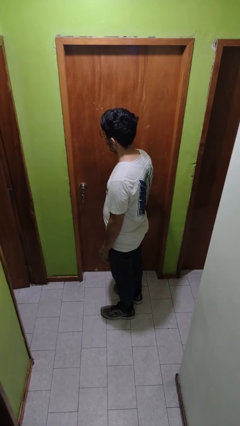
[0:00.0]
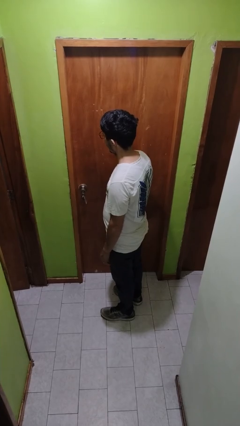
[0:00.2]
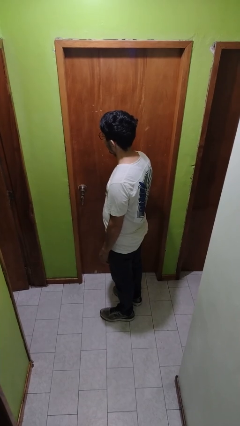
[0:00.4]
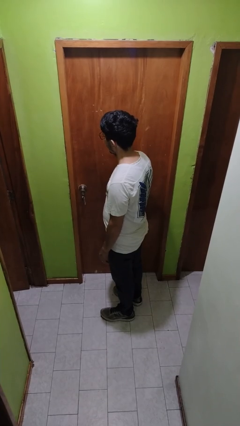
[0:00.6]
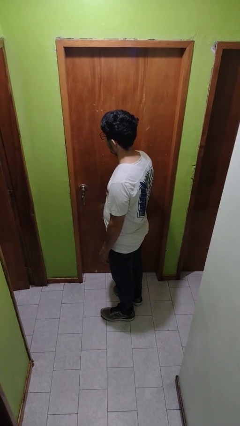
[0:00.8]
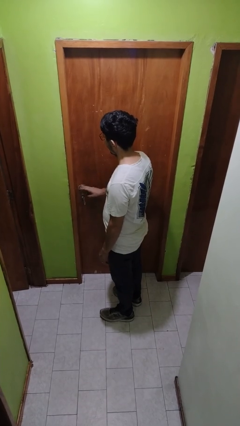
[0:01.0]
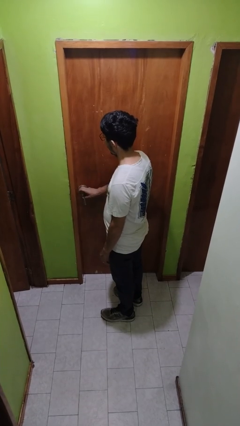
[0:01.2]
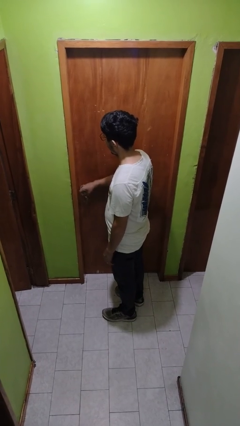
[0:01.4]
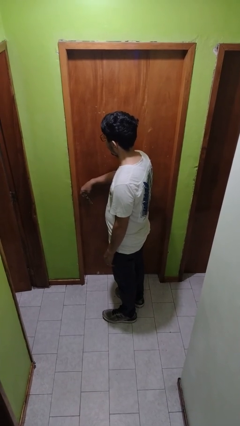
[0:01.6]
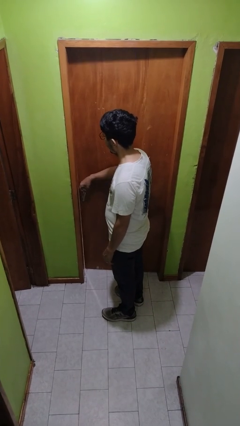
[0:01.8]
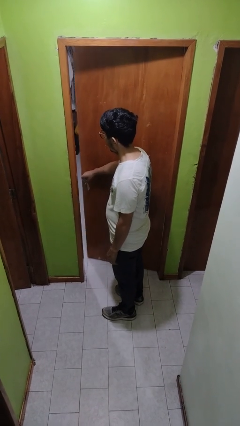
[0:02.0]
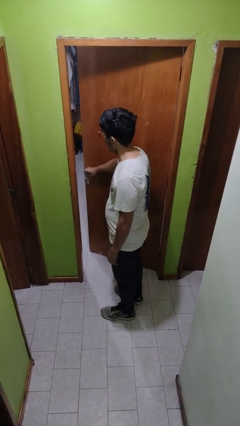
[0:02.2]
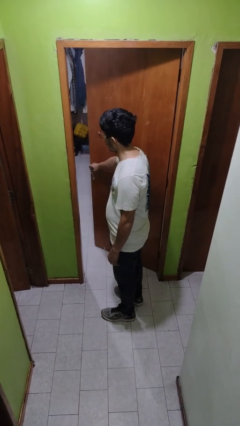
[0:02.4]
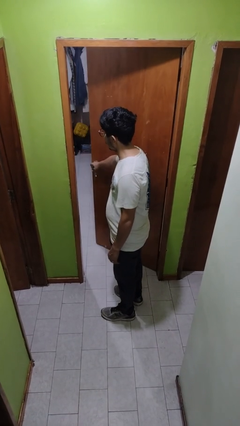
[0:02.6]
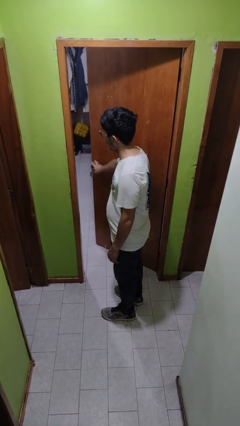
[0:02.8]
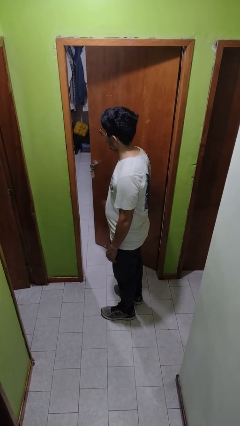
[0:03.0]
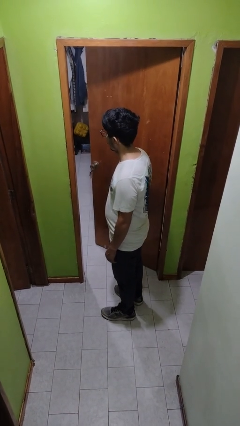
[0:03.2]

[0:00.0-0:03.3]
person opens facility door

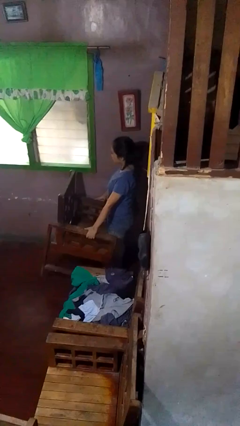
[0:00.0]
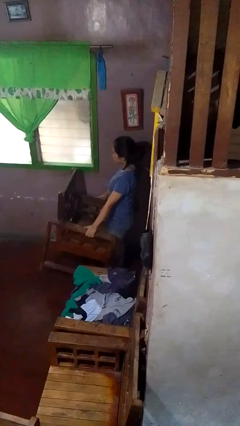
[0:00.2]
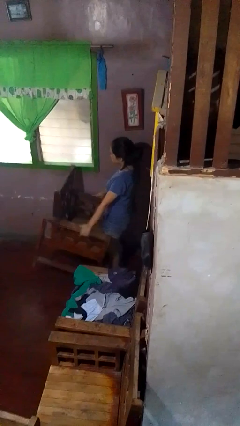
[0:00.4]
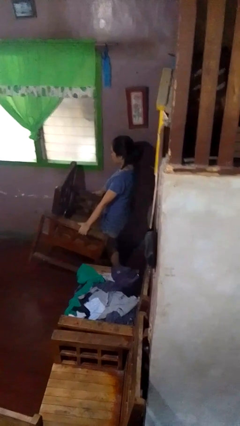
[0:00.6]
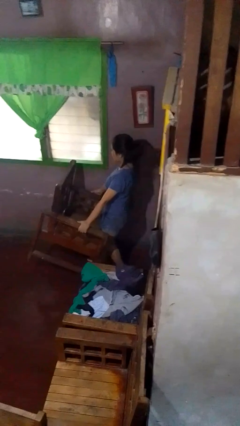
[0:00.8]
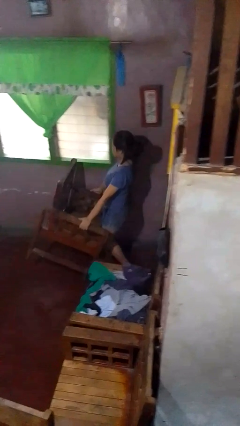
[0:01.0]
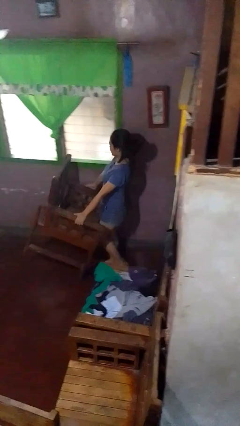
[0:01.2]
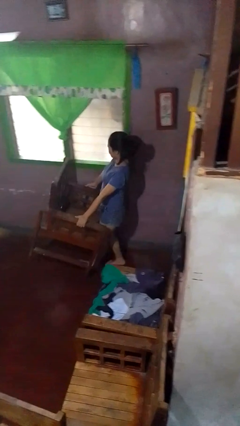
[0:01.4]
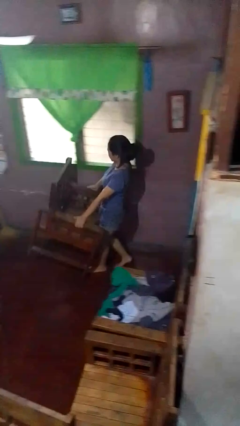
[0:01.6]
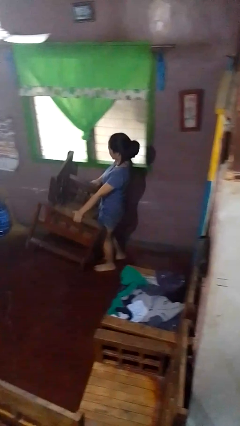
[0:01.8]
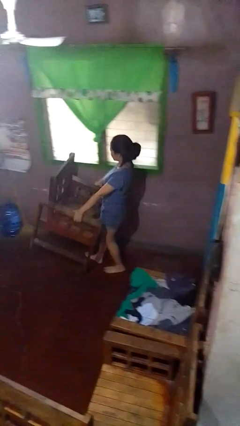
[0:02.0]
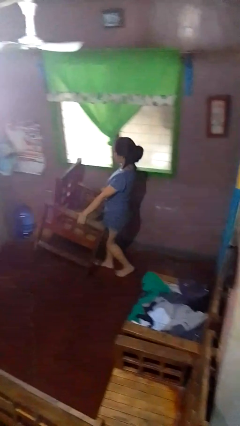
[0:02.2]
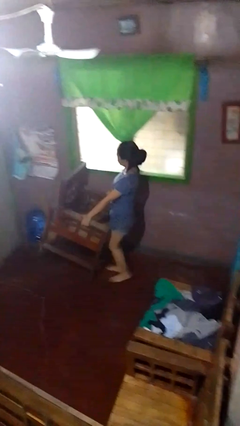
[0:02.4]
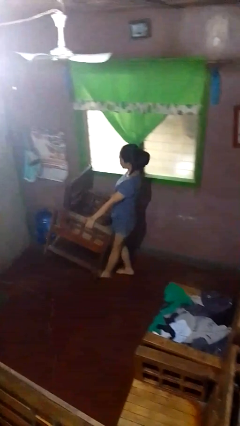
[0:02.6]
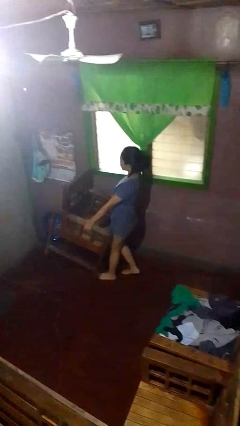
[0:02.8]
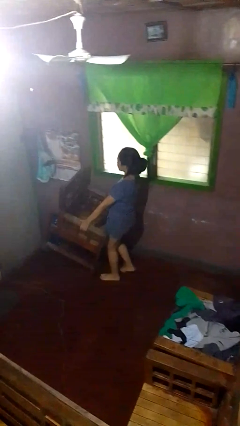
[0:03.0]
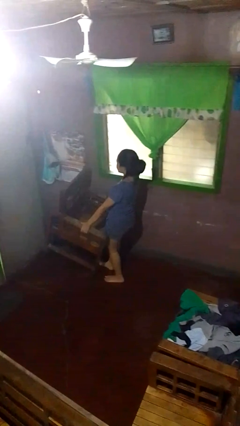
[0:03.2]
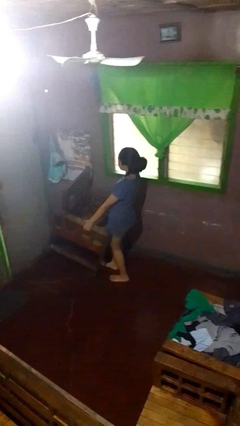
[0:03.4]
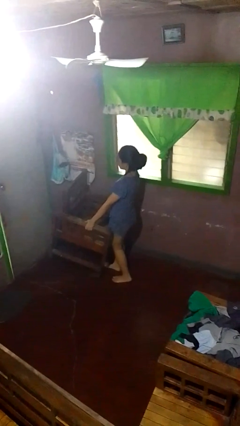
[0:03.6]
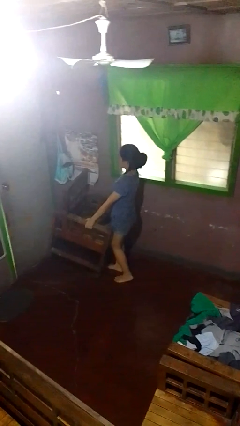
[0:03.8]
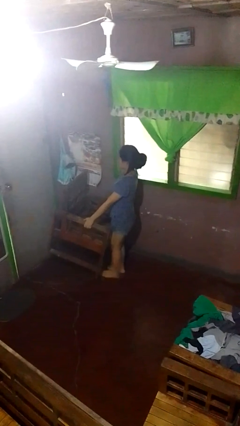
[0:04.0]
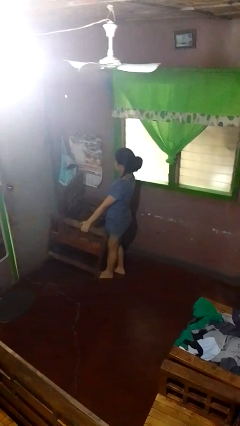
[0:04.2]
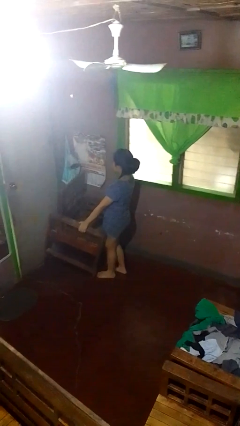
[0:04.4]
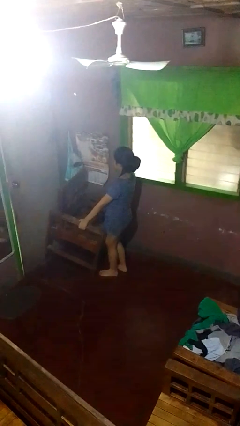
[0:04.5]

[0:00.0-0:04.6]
person carries furniture

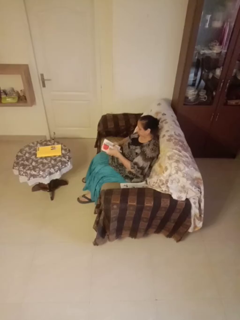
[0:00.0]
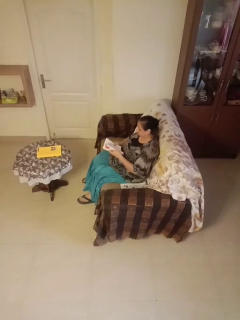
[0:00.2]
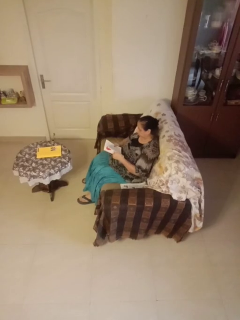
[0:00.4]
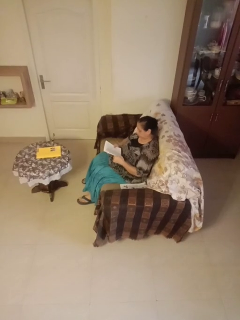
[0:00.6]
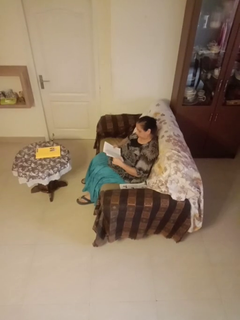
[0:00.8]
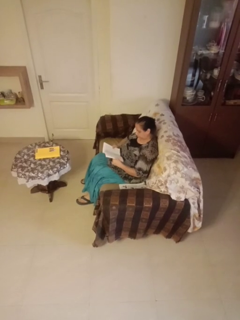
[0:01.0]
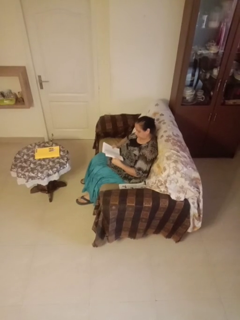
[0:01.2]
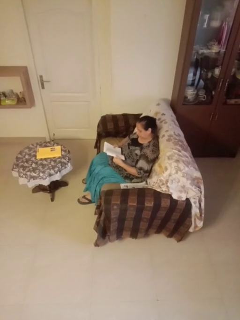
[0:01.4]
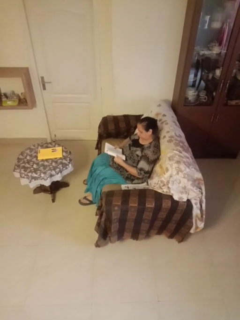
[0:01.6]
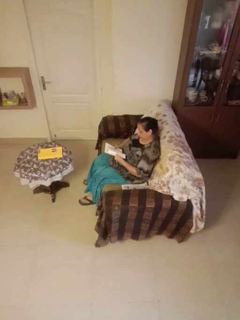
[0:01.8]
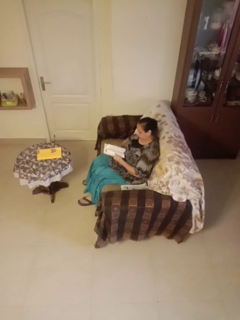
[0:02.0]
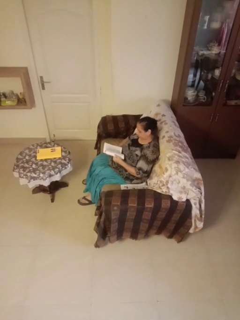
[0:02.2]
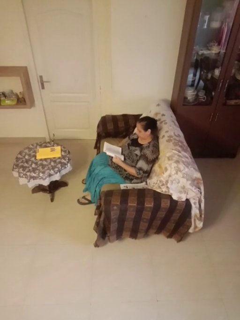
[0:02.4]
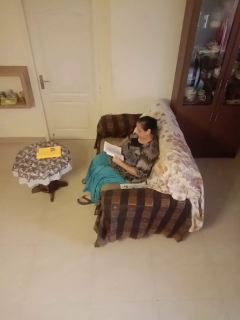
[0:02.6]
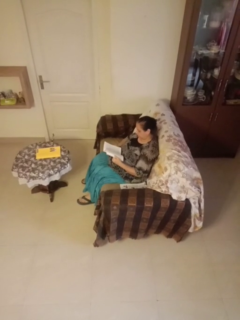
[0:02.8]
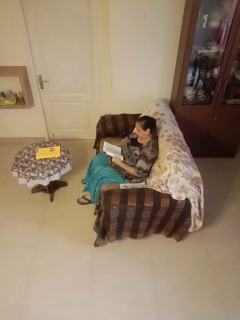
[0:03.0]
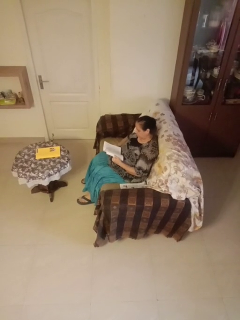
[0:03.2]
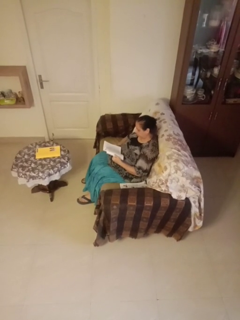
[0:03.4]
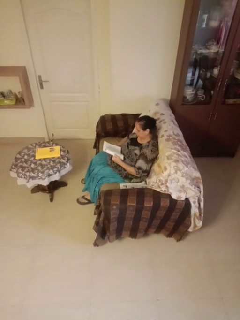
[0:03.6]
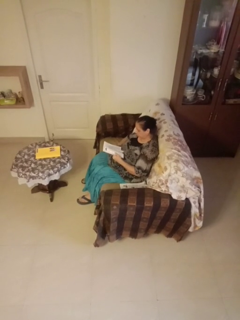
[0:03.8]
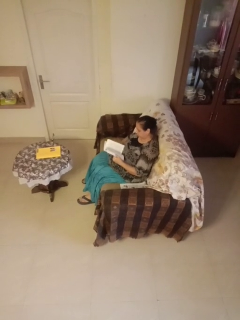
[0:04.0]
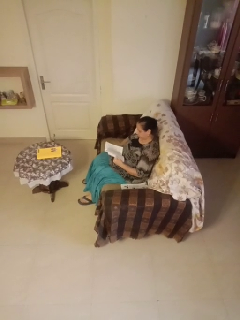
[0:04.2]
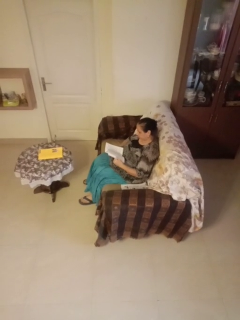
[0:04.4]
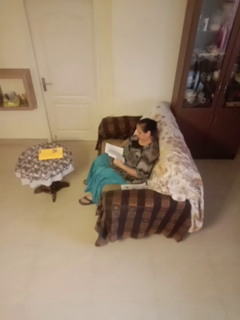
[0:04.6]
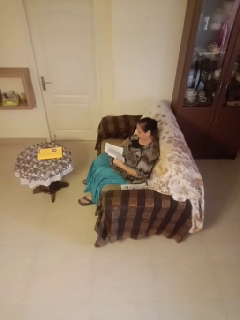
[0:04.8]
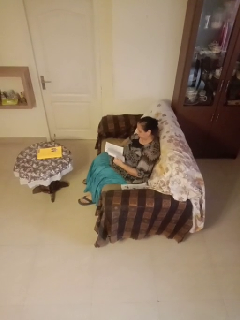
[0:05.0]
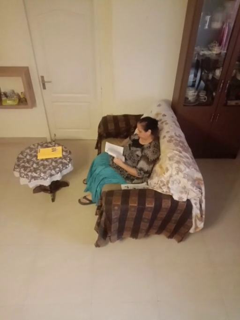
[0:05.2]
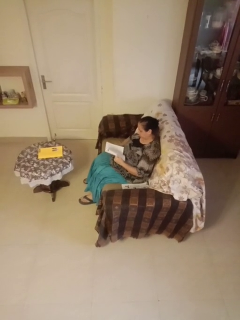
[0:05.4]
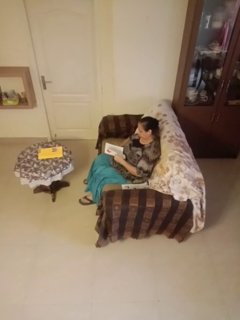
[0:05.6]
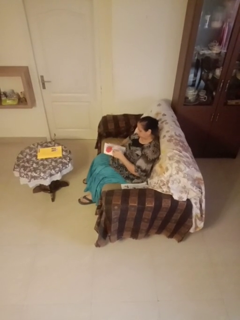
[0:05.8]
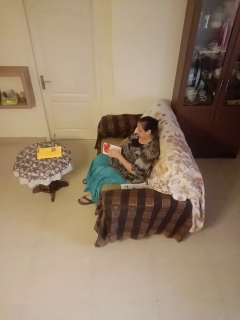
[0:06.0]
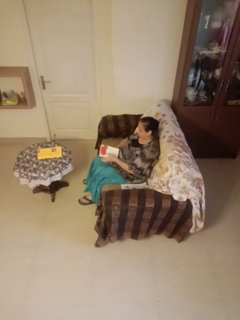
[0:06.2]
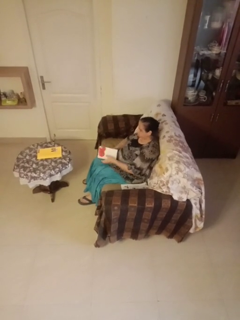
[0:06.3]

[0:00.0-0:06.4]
person reads book

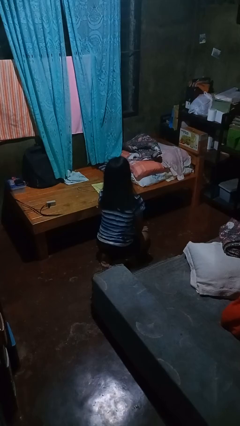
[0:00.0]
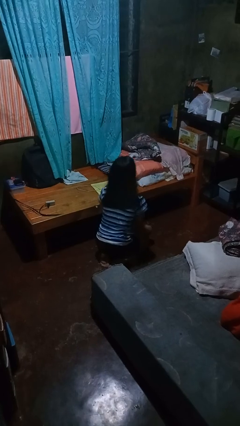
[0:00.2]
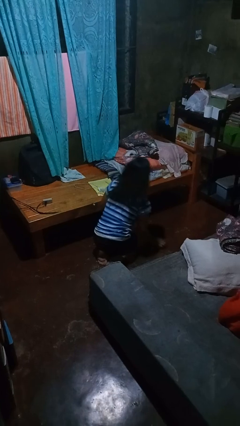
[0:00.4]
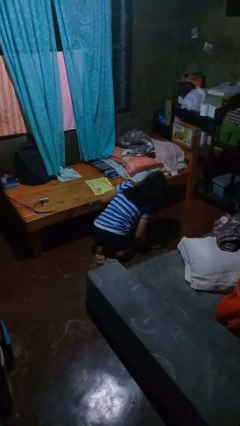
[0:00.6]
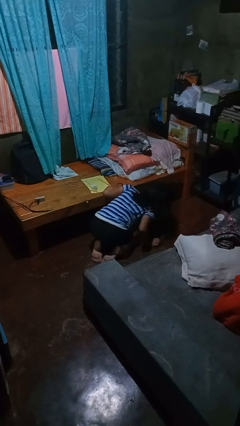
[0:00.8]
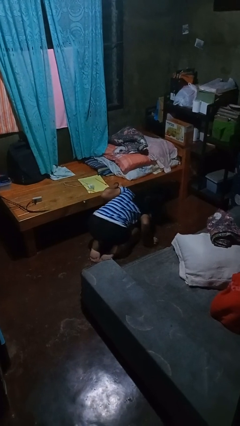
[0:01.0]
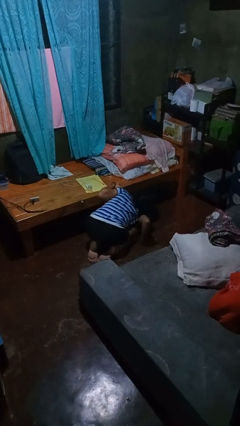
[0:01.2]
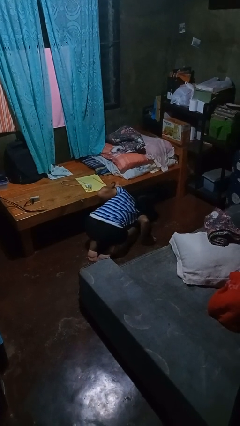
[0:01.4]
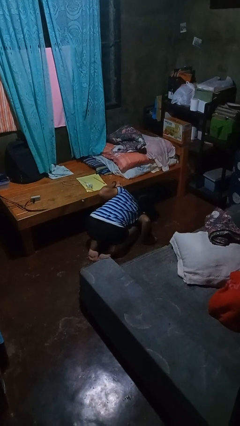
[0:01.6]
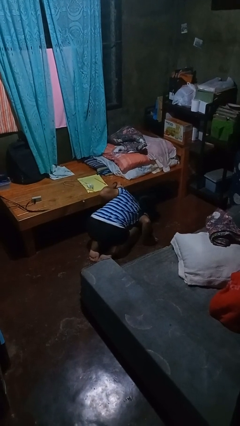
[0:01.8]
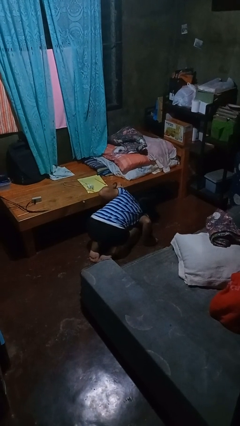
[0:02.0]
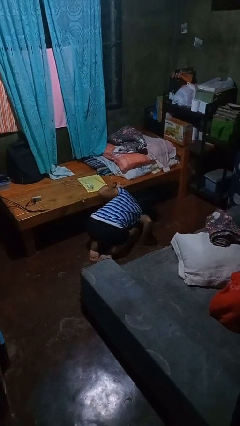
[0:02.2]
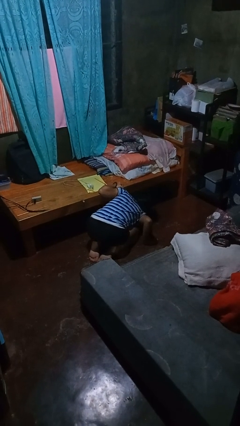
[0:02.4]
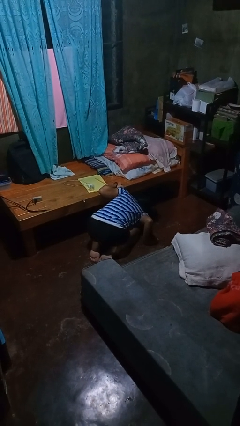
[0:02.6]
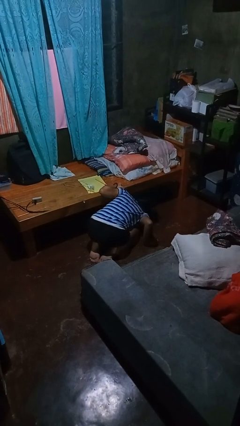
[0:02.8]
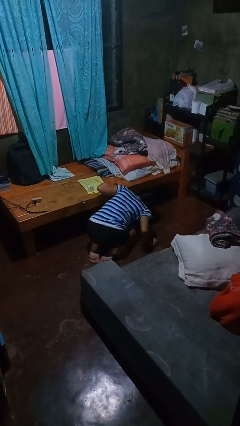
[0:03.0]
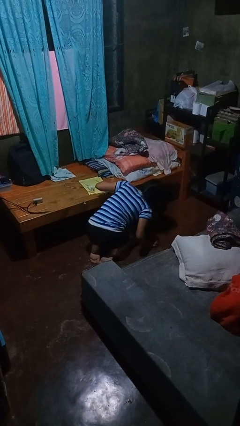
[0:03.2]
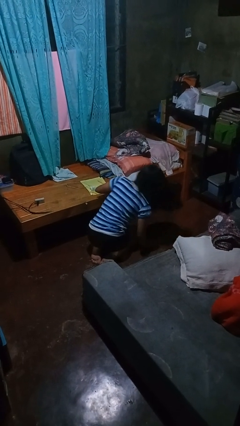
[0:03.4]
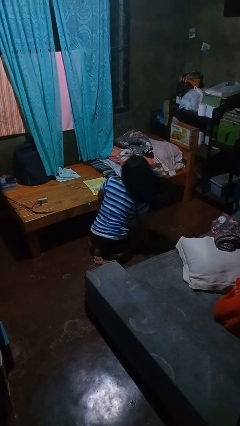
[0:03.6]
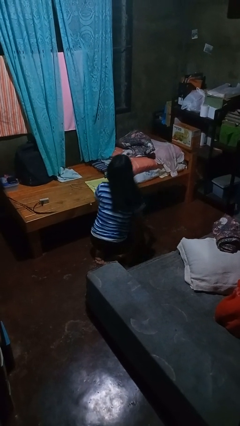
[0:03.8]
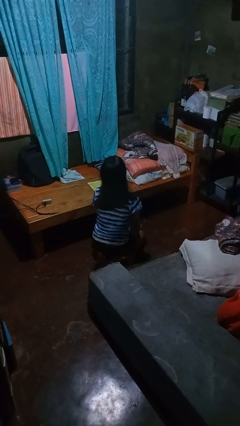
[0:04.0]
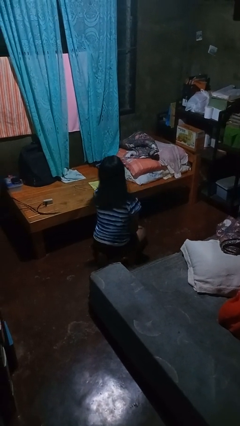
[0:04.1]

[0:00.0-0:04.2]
person searches under bed

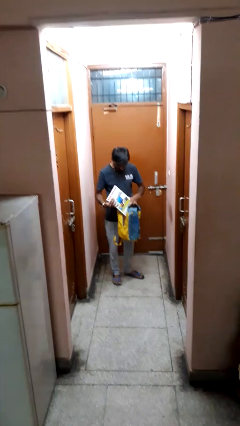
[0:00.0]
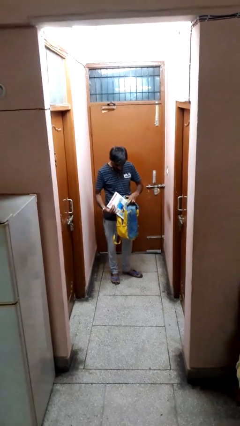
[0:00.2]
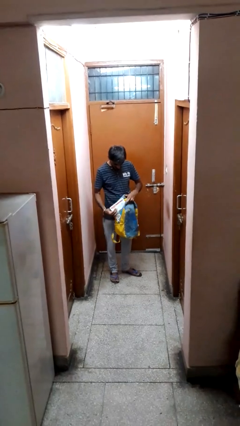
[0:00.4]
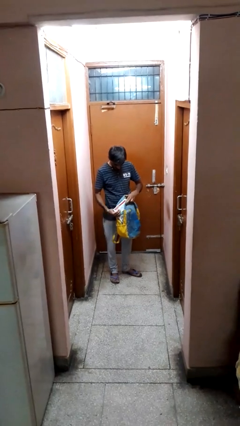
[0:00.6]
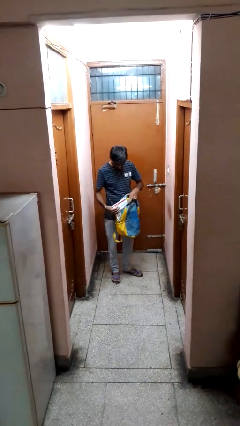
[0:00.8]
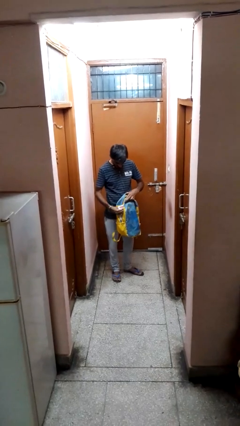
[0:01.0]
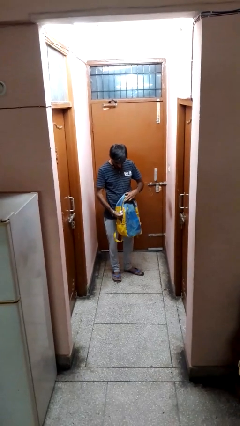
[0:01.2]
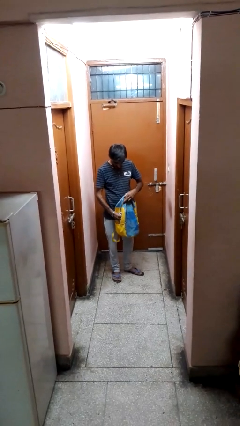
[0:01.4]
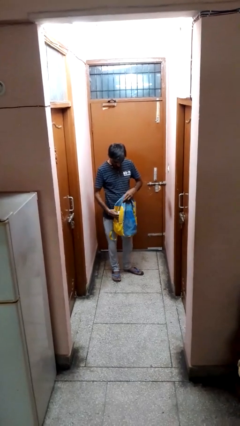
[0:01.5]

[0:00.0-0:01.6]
person puts object into backpack
